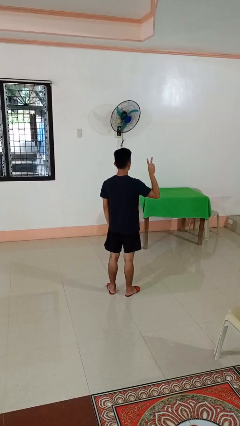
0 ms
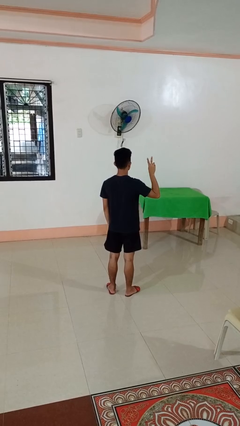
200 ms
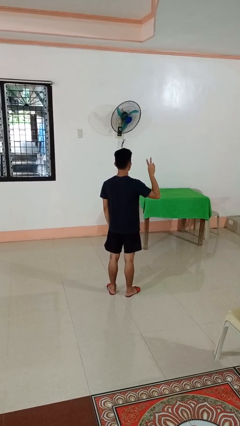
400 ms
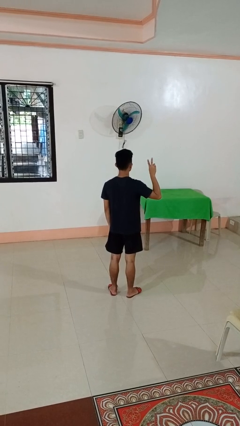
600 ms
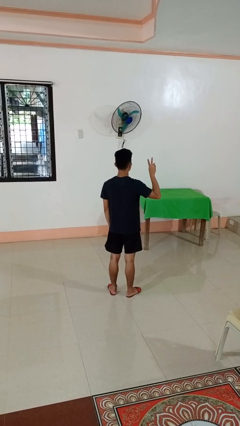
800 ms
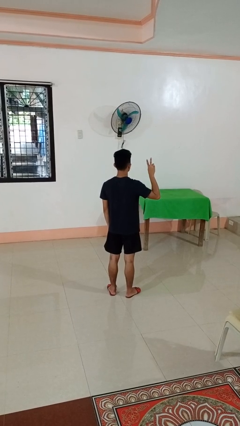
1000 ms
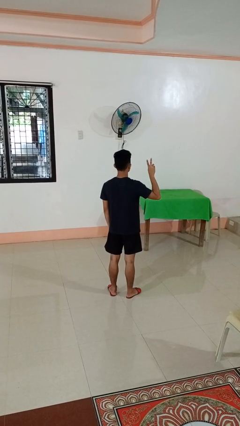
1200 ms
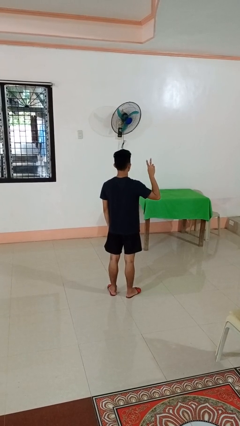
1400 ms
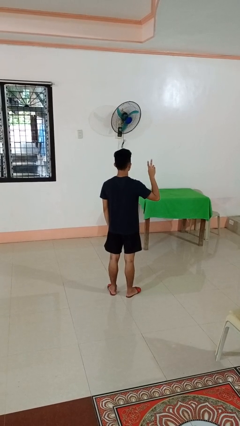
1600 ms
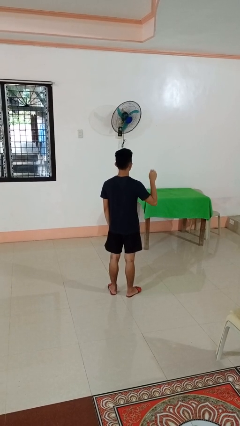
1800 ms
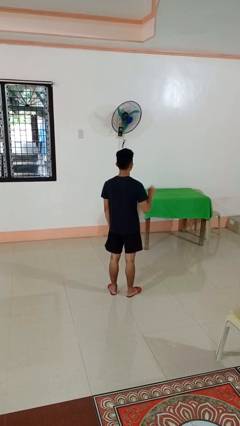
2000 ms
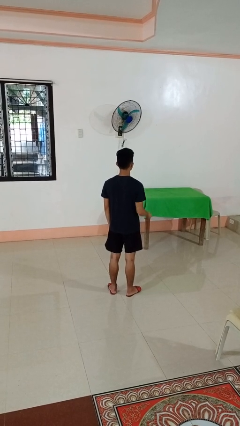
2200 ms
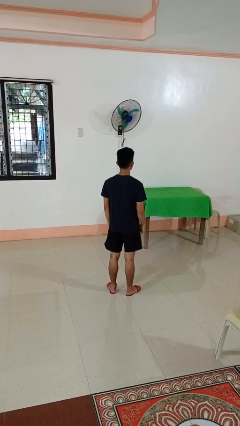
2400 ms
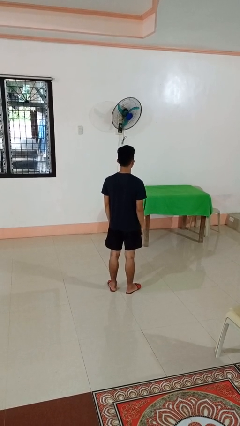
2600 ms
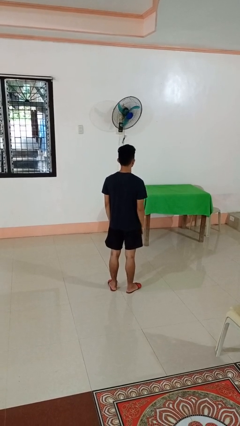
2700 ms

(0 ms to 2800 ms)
person gestures peace

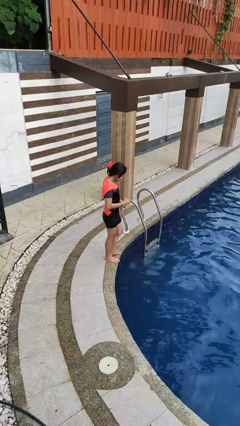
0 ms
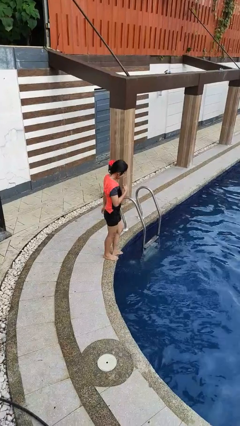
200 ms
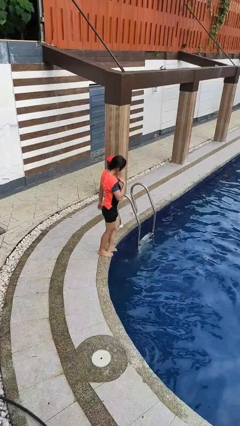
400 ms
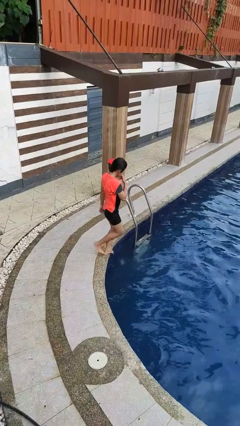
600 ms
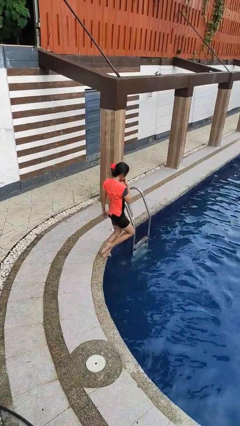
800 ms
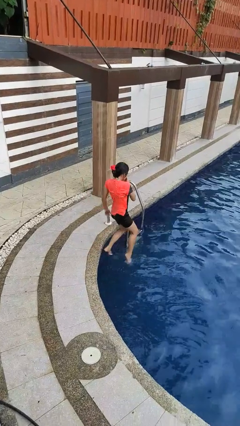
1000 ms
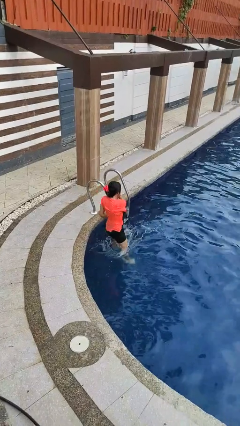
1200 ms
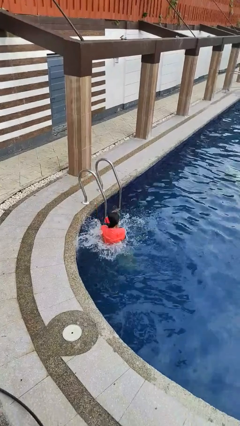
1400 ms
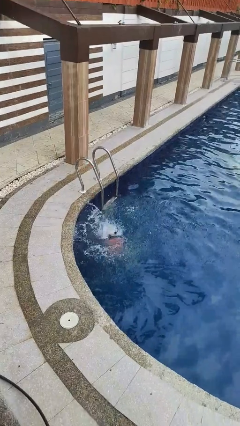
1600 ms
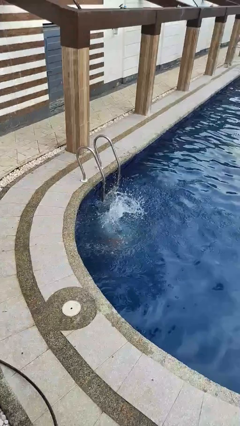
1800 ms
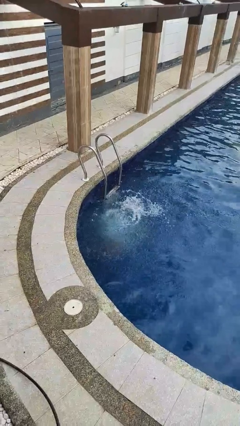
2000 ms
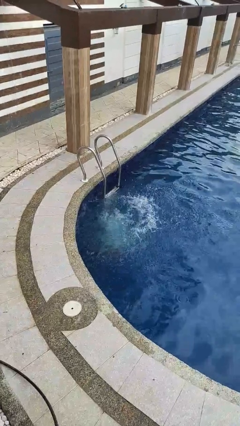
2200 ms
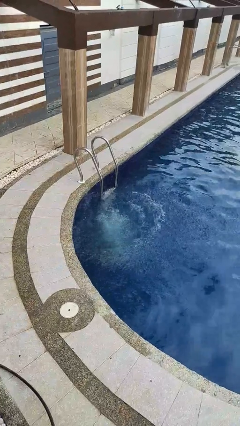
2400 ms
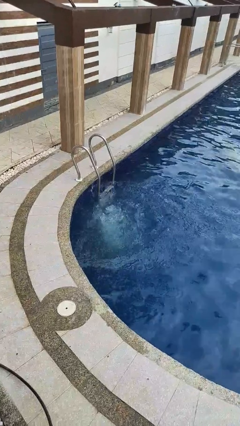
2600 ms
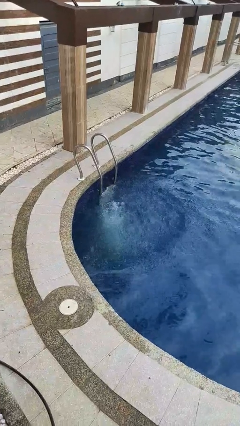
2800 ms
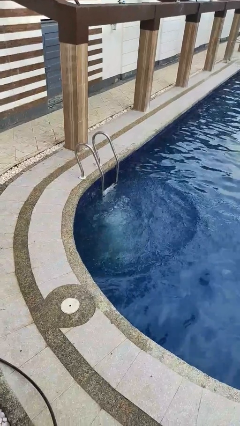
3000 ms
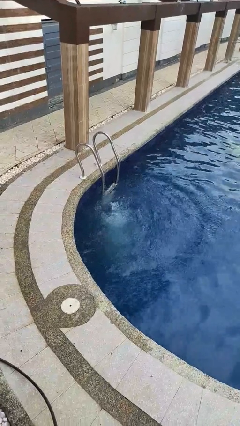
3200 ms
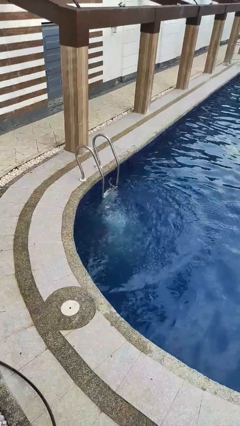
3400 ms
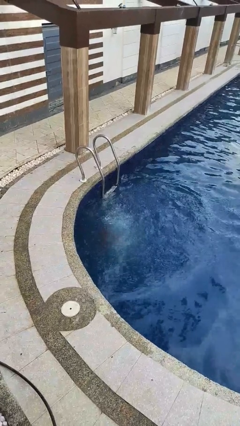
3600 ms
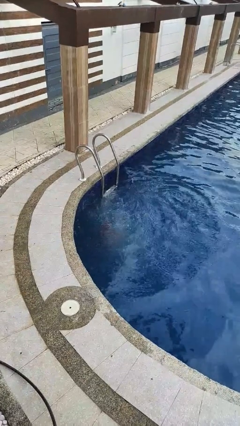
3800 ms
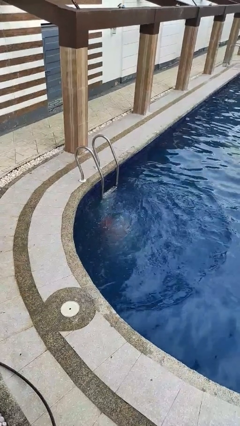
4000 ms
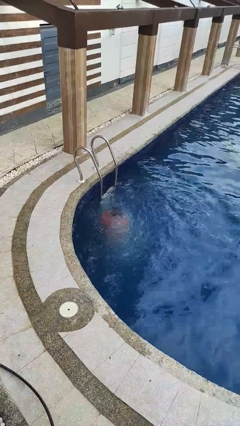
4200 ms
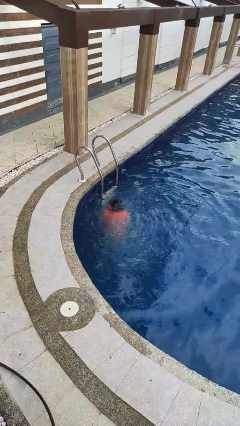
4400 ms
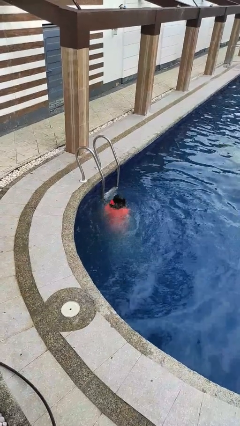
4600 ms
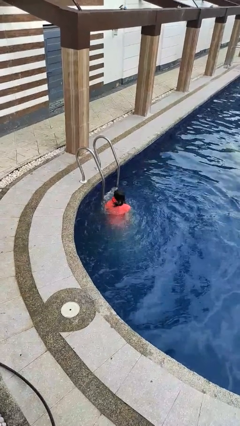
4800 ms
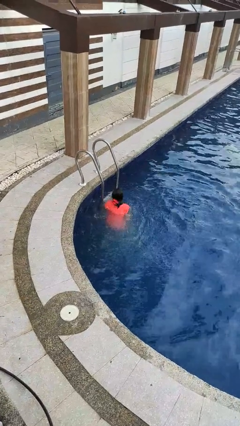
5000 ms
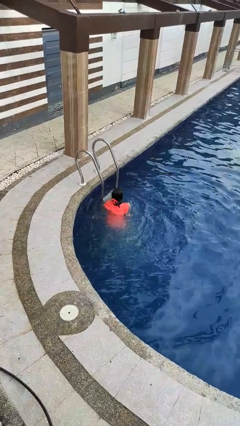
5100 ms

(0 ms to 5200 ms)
person falls into pool

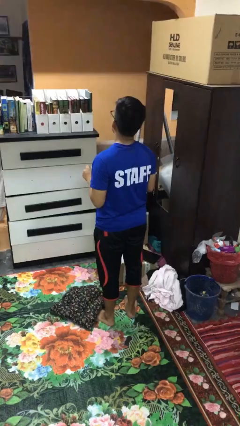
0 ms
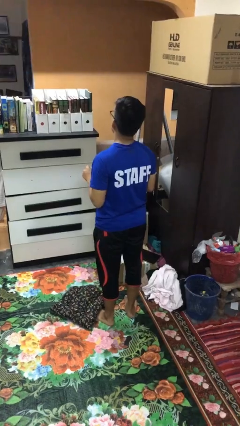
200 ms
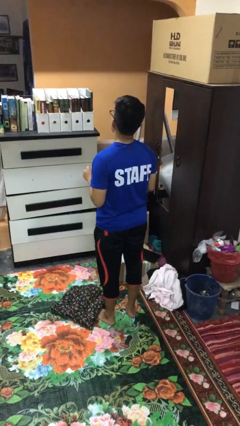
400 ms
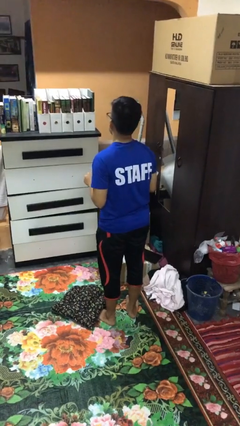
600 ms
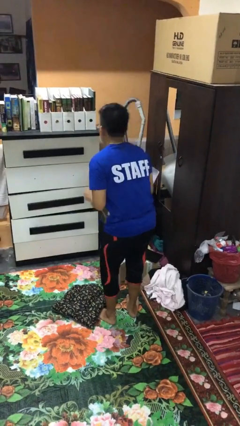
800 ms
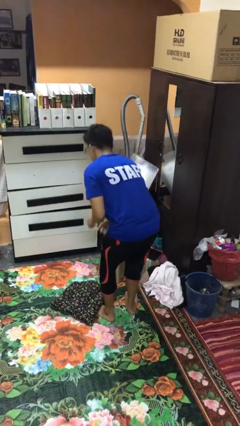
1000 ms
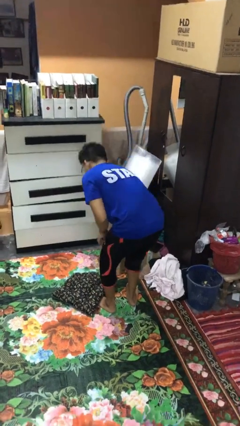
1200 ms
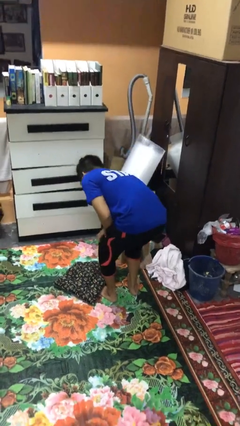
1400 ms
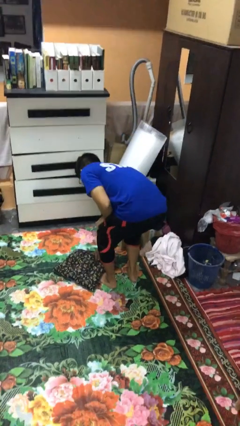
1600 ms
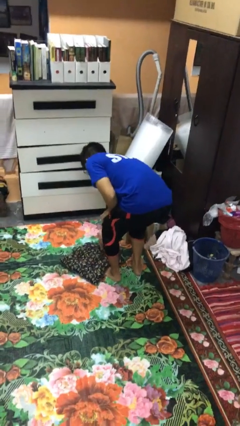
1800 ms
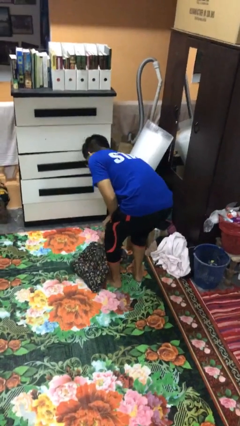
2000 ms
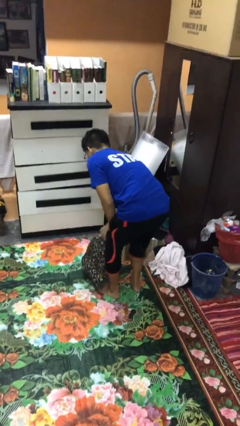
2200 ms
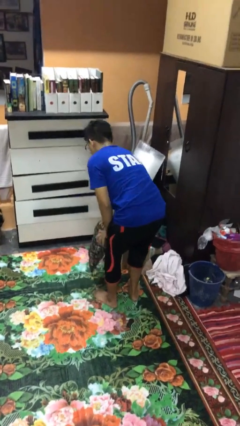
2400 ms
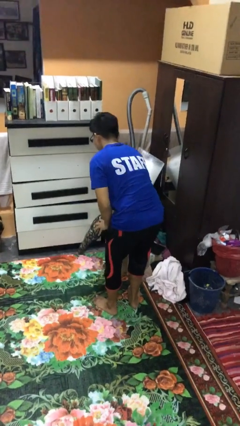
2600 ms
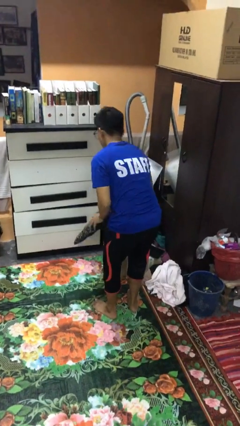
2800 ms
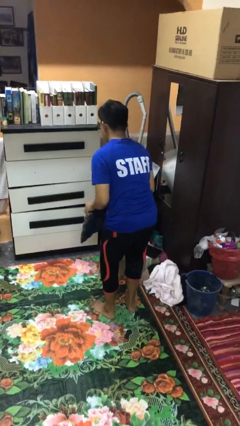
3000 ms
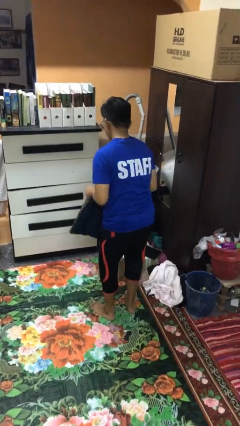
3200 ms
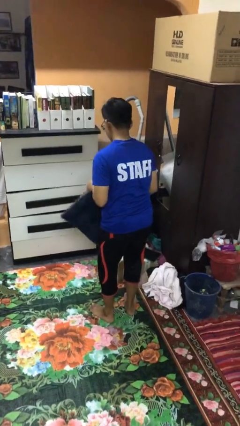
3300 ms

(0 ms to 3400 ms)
person picks up object from floor

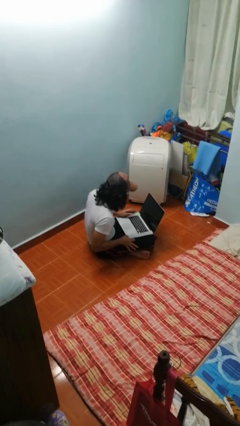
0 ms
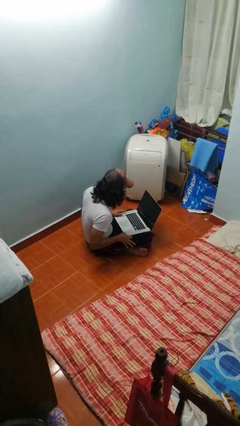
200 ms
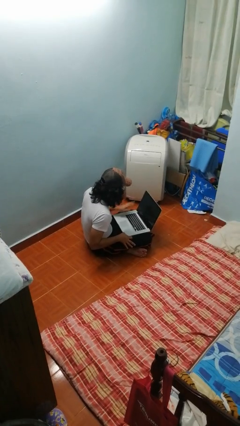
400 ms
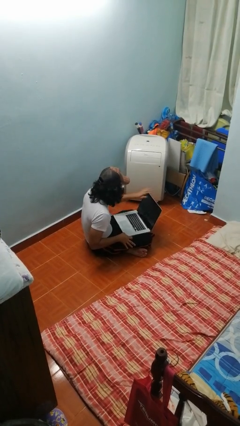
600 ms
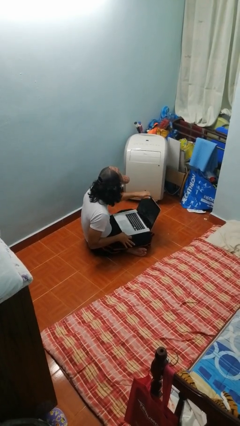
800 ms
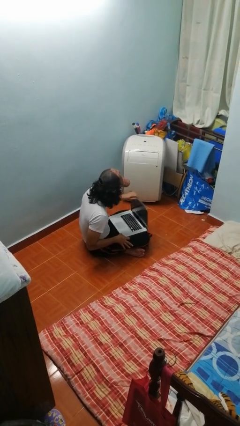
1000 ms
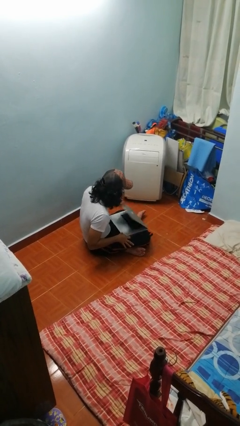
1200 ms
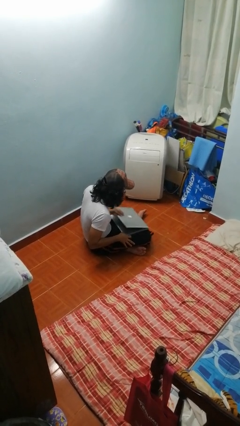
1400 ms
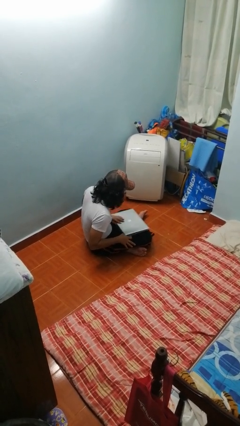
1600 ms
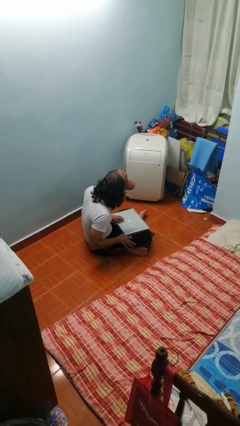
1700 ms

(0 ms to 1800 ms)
person closes laptop

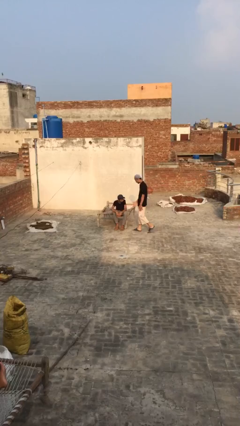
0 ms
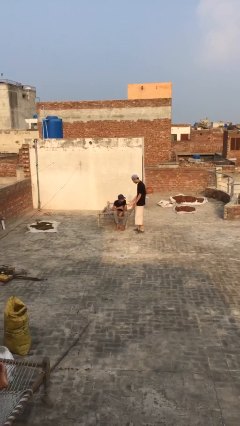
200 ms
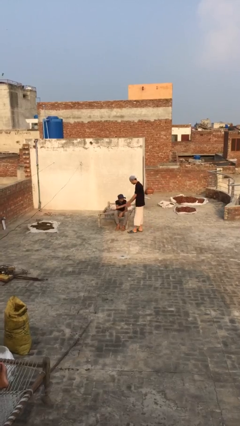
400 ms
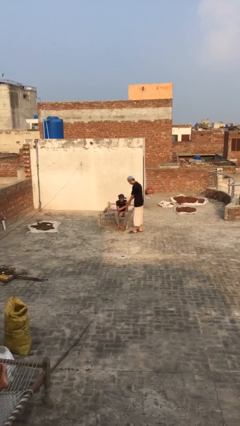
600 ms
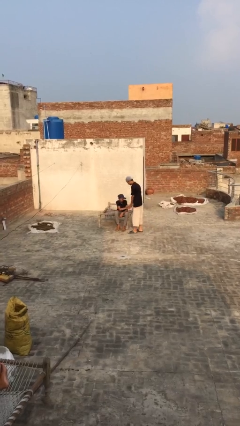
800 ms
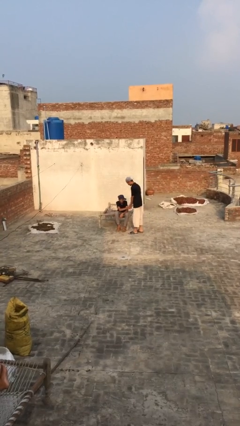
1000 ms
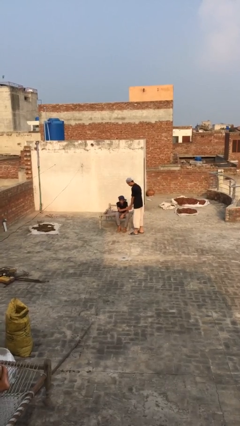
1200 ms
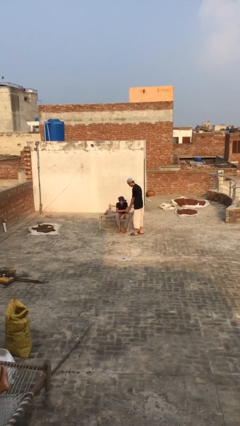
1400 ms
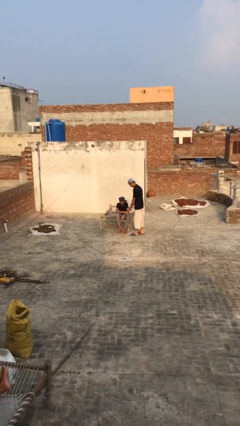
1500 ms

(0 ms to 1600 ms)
person shakes hand

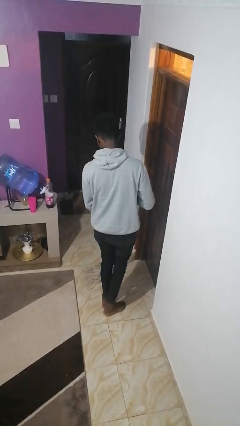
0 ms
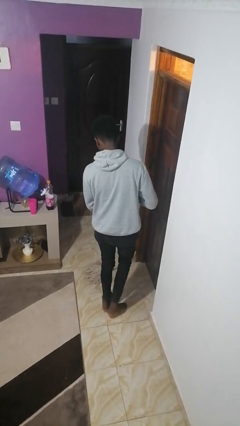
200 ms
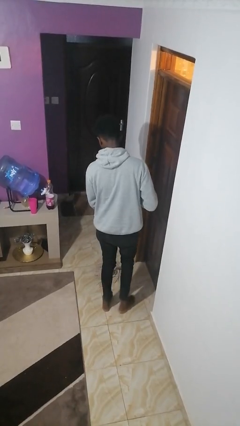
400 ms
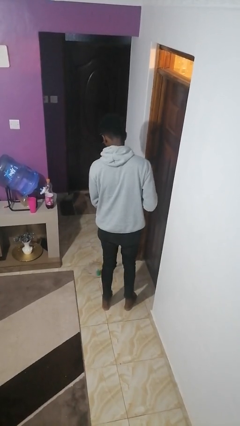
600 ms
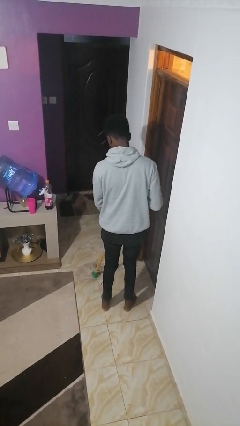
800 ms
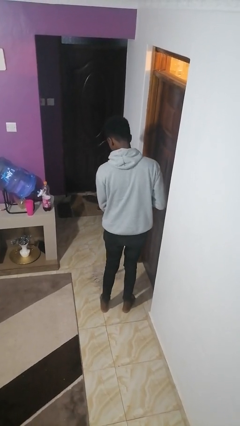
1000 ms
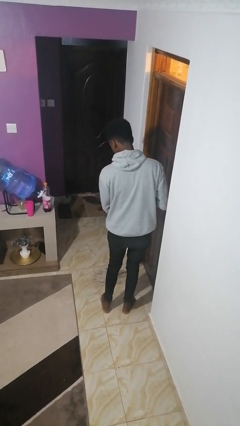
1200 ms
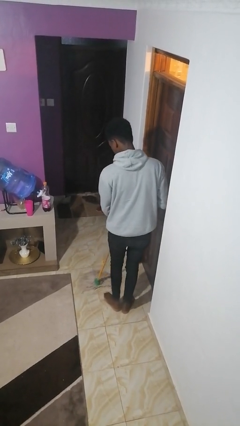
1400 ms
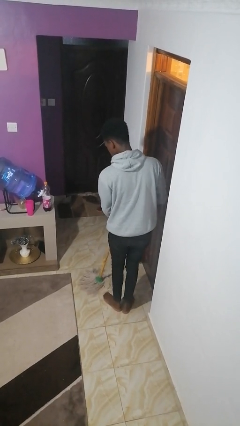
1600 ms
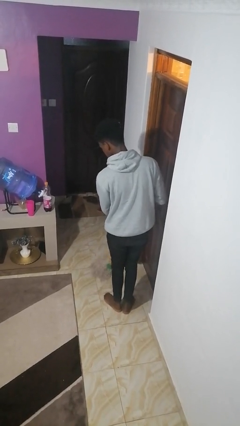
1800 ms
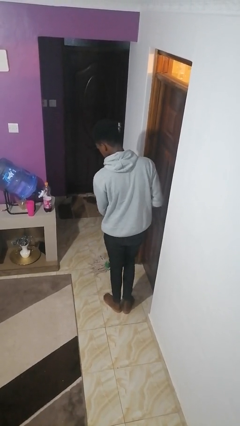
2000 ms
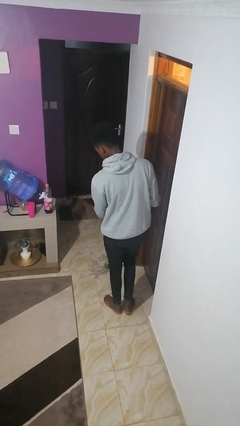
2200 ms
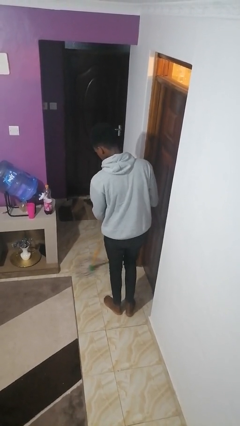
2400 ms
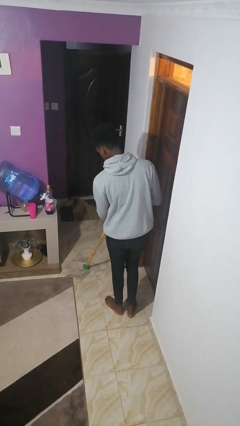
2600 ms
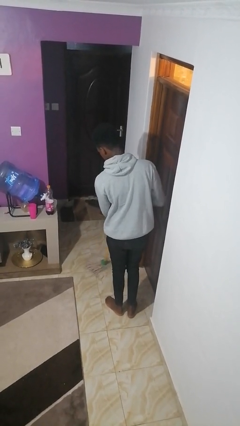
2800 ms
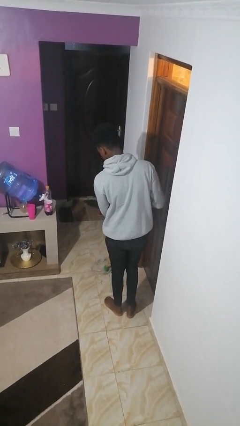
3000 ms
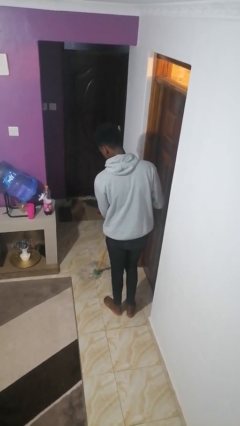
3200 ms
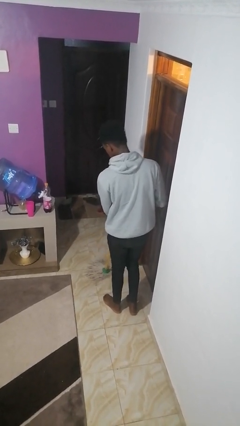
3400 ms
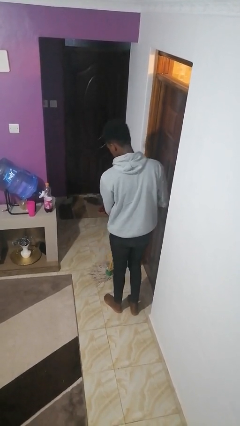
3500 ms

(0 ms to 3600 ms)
person mops
